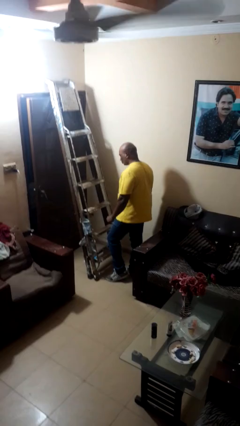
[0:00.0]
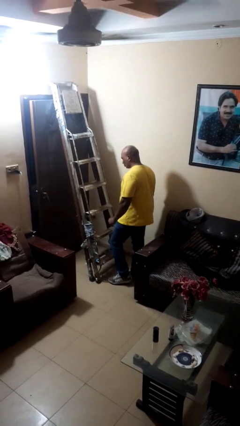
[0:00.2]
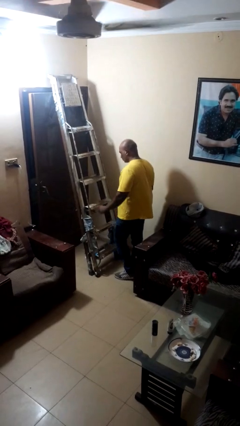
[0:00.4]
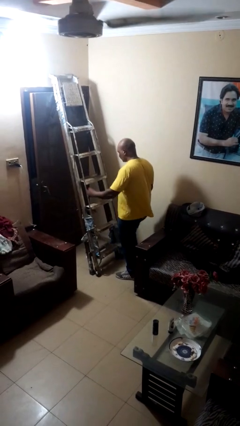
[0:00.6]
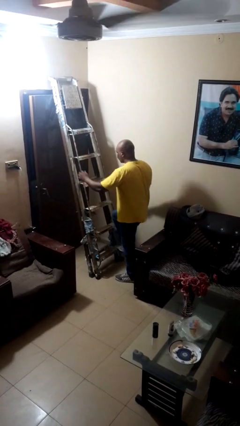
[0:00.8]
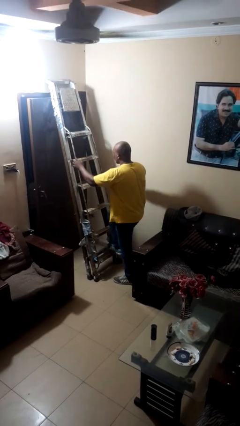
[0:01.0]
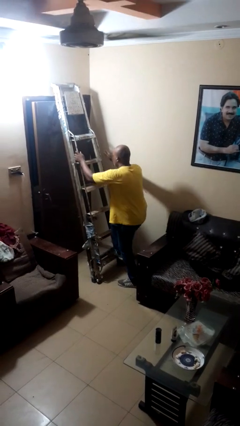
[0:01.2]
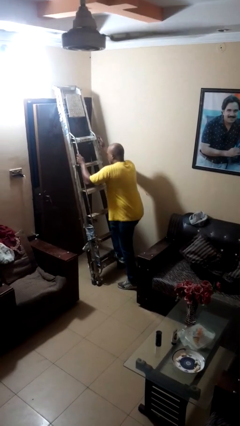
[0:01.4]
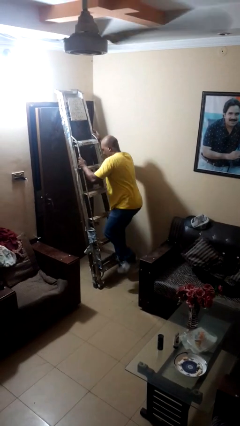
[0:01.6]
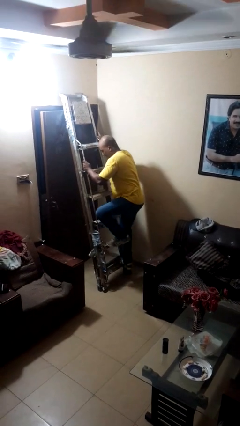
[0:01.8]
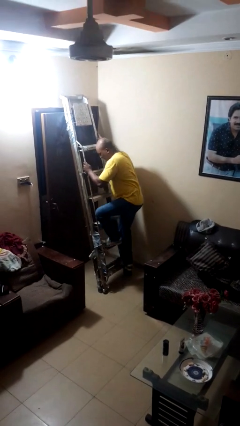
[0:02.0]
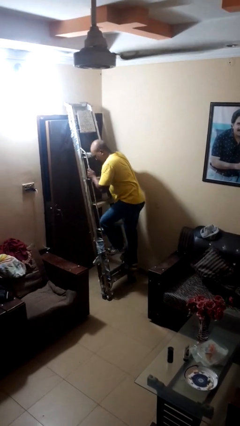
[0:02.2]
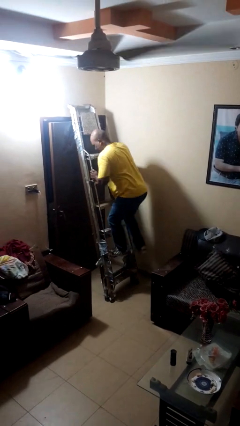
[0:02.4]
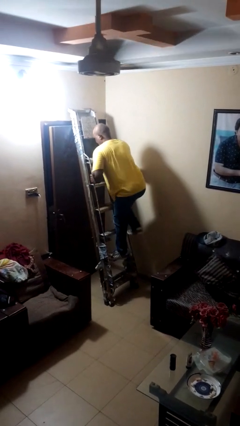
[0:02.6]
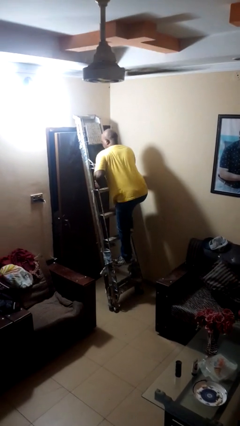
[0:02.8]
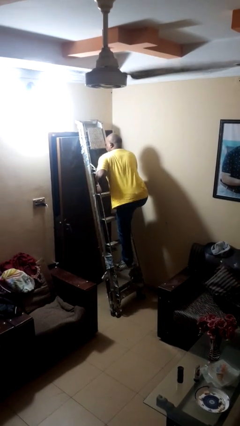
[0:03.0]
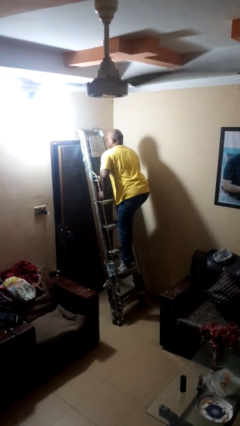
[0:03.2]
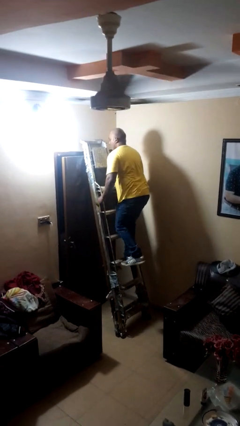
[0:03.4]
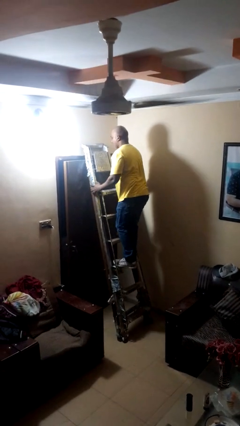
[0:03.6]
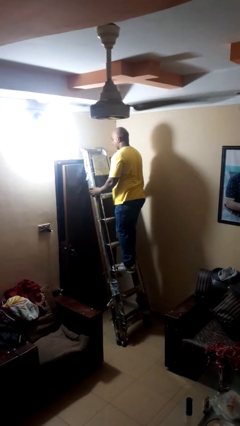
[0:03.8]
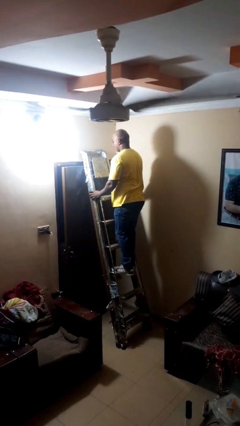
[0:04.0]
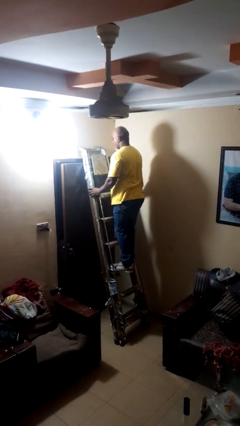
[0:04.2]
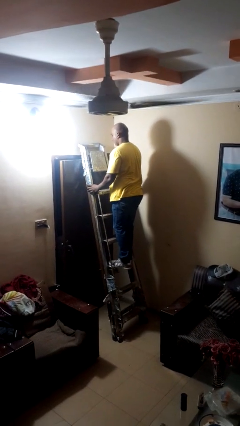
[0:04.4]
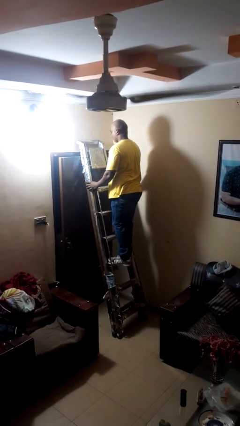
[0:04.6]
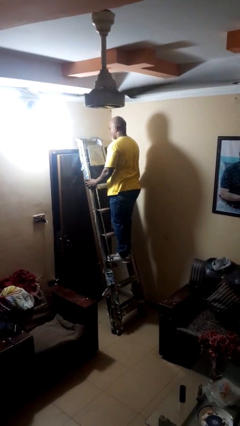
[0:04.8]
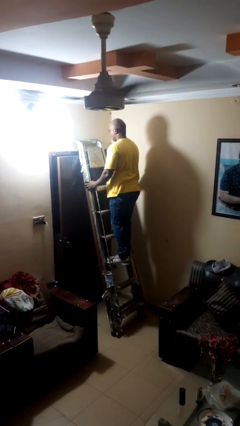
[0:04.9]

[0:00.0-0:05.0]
person climbs up stairs

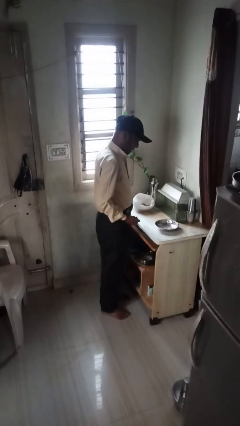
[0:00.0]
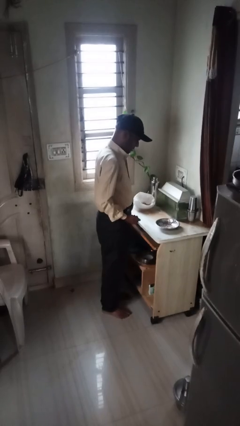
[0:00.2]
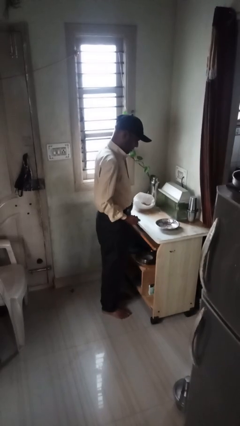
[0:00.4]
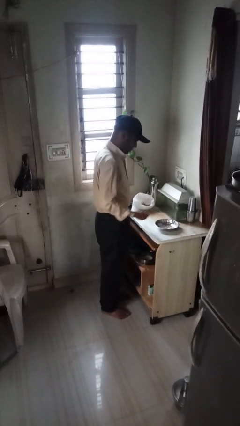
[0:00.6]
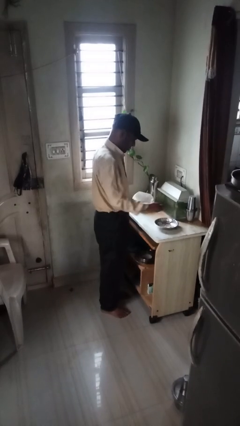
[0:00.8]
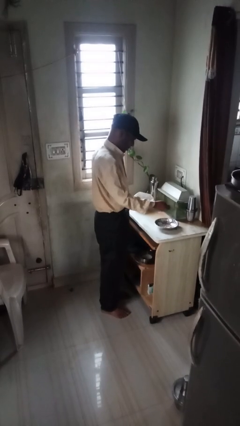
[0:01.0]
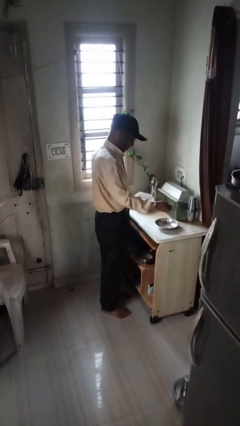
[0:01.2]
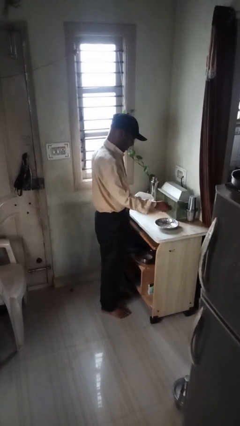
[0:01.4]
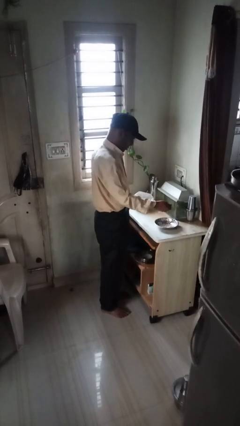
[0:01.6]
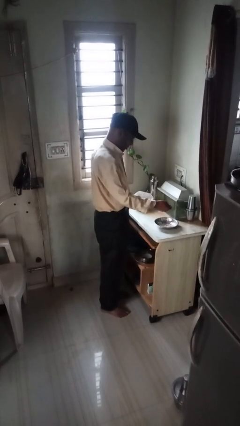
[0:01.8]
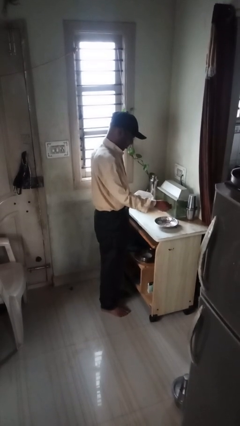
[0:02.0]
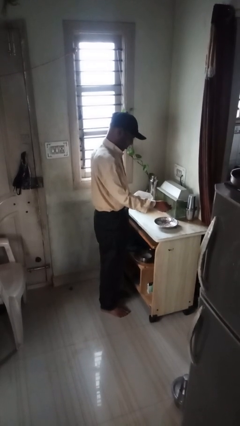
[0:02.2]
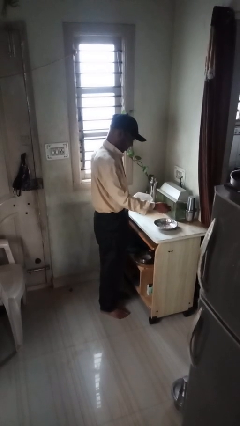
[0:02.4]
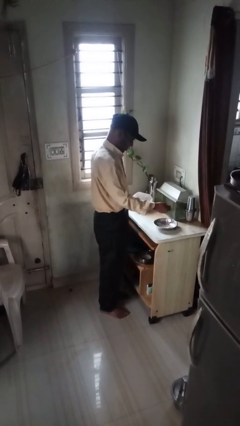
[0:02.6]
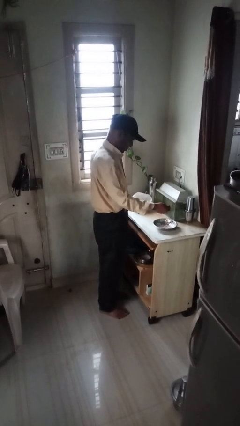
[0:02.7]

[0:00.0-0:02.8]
person pours into bowl

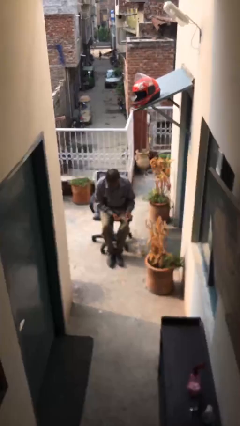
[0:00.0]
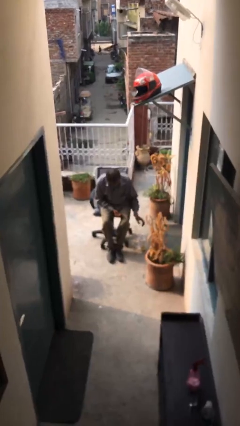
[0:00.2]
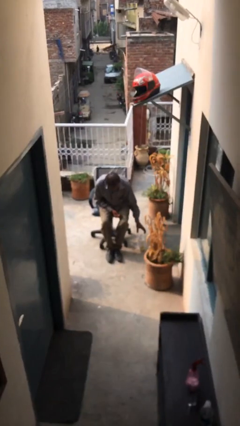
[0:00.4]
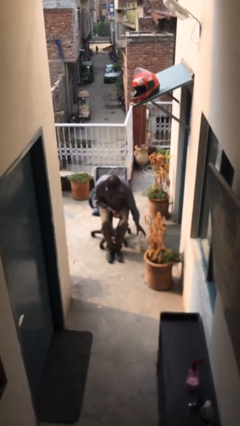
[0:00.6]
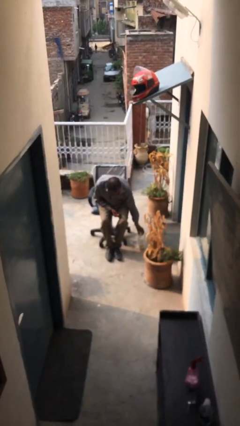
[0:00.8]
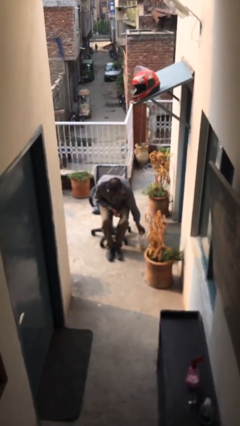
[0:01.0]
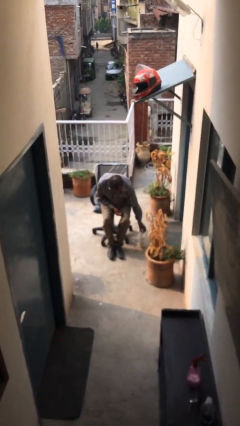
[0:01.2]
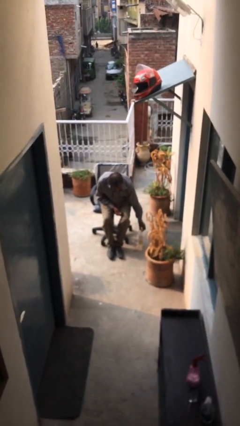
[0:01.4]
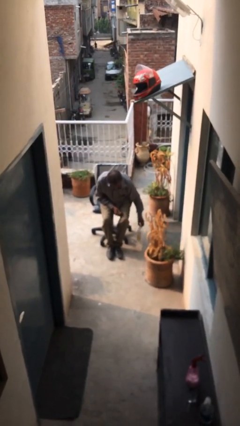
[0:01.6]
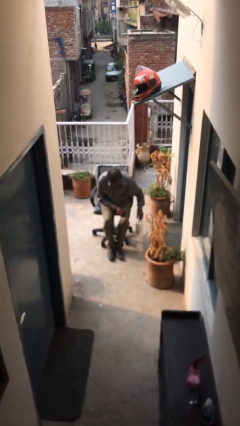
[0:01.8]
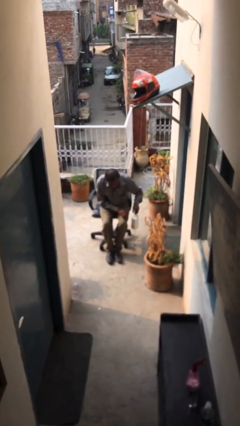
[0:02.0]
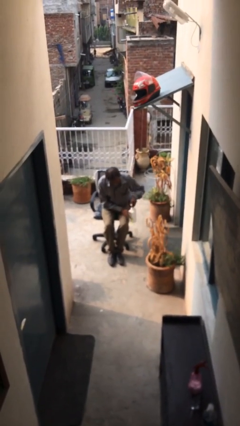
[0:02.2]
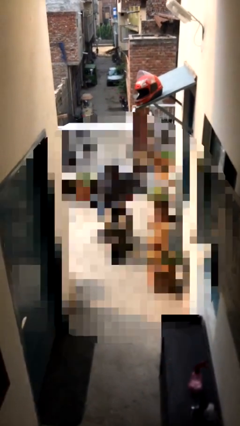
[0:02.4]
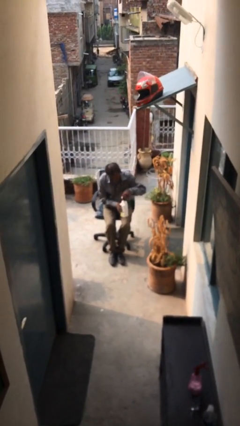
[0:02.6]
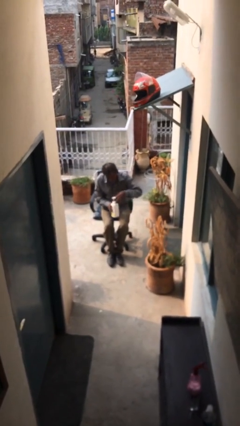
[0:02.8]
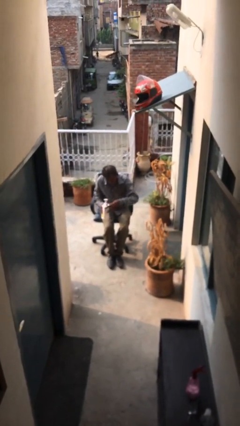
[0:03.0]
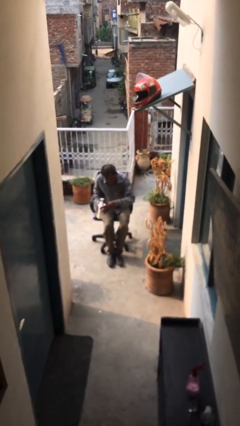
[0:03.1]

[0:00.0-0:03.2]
person picks up object from floor

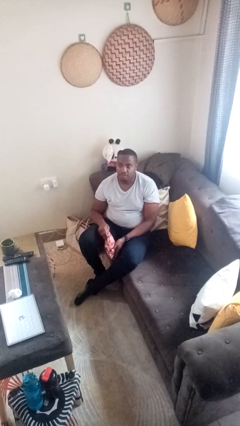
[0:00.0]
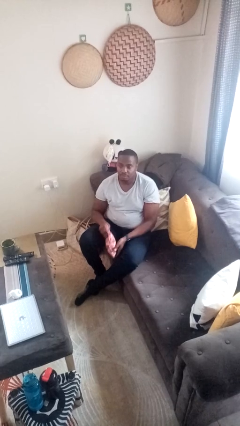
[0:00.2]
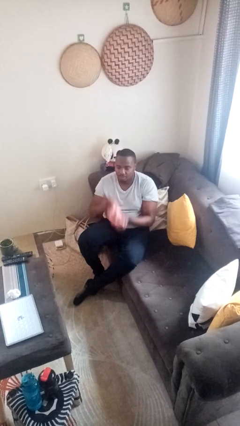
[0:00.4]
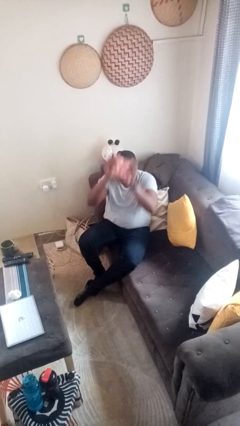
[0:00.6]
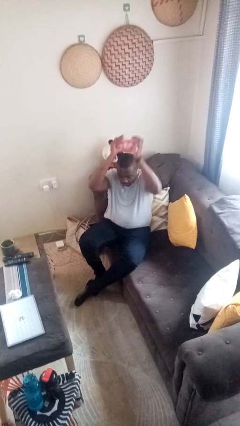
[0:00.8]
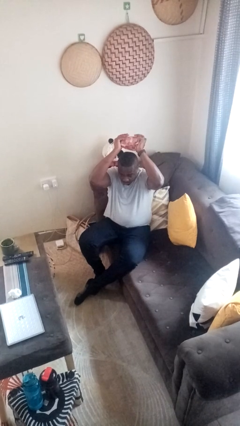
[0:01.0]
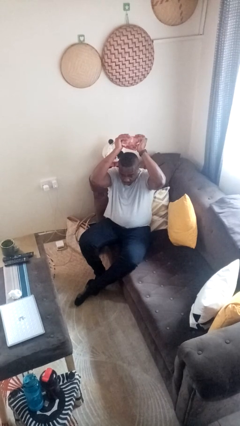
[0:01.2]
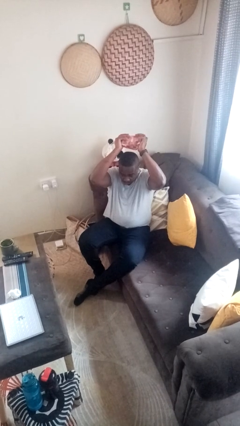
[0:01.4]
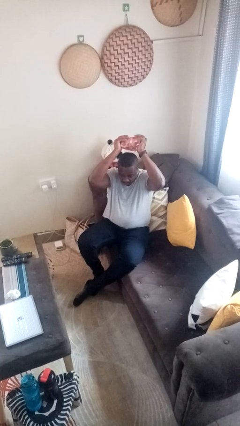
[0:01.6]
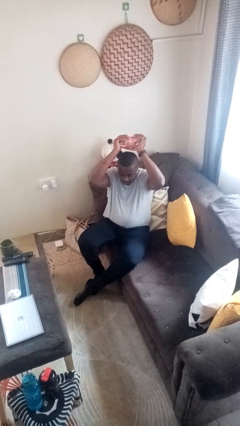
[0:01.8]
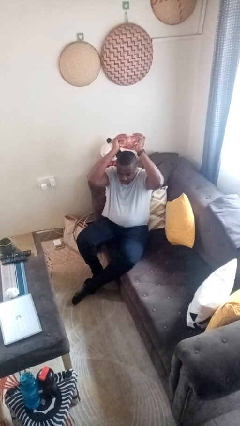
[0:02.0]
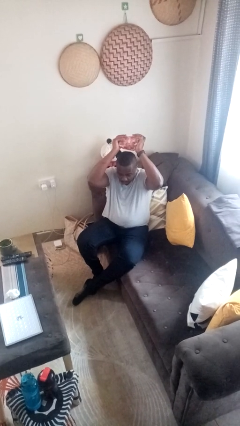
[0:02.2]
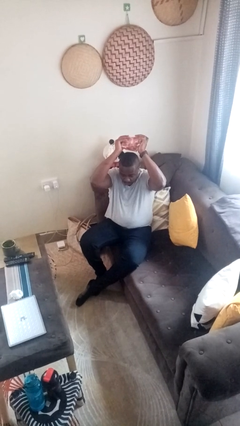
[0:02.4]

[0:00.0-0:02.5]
person holds object above head

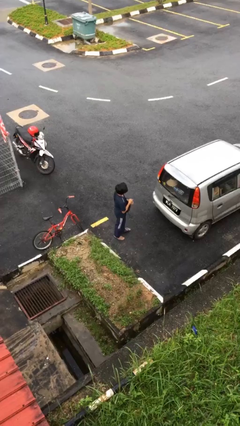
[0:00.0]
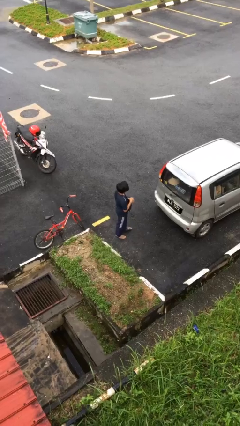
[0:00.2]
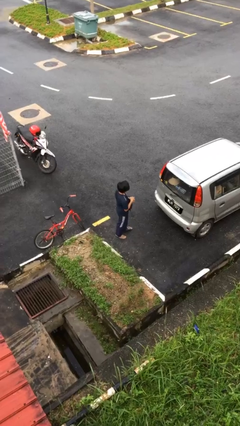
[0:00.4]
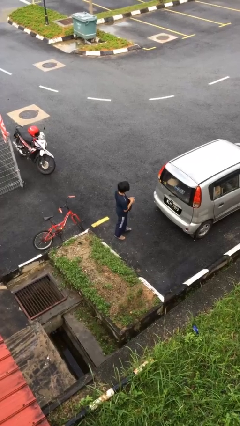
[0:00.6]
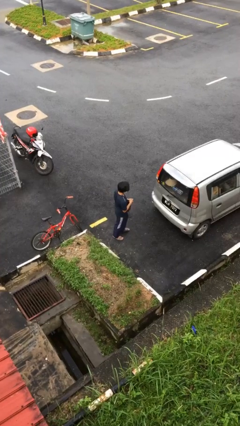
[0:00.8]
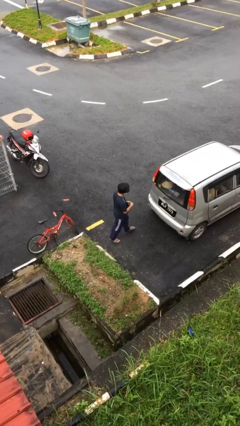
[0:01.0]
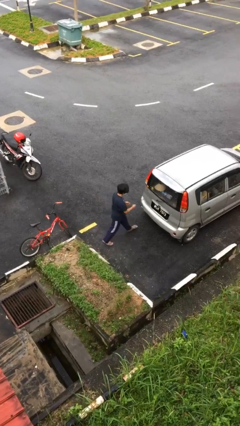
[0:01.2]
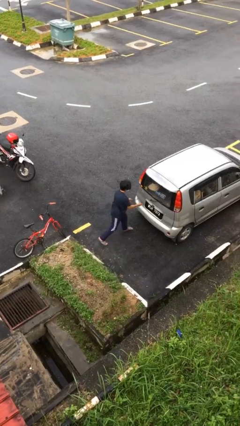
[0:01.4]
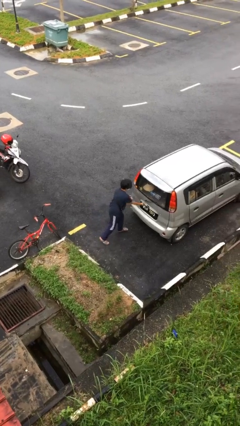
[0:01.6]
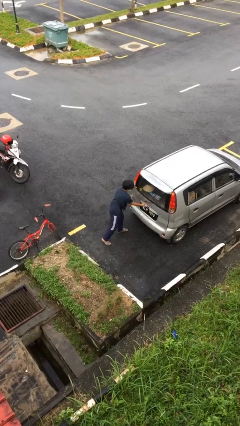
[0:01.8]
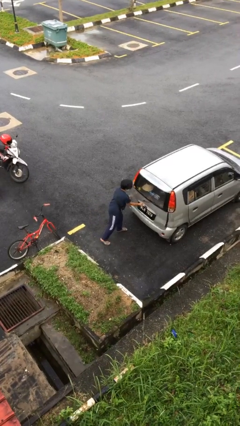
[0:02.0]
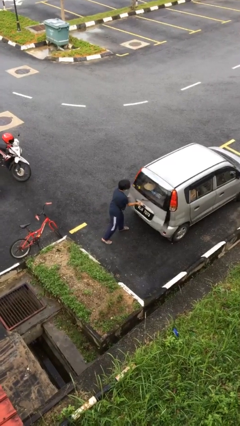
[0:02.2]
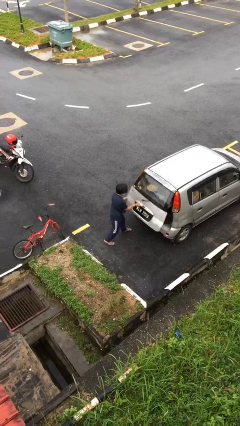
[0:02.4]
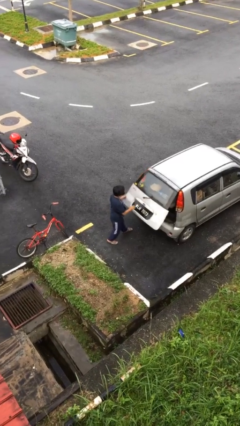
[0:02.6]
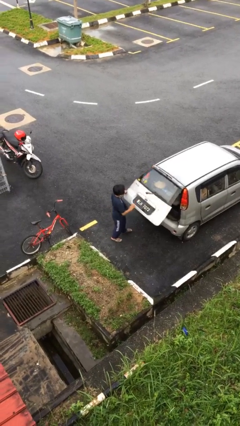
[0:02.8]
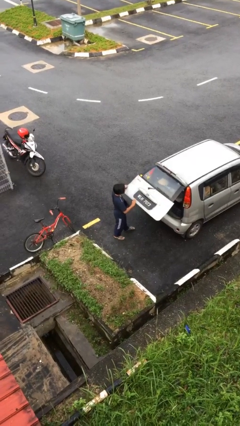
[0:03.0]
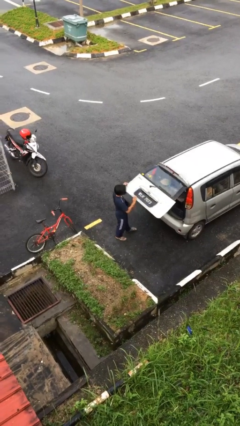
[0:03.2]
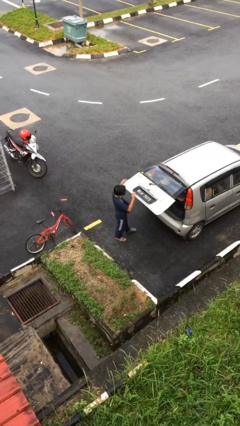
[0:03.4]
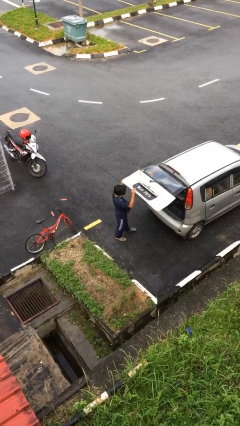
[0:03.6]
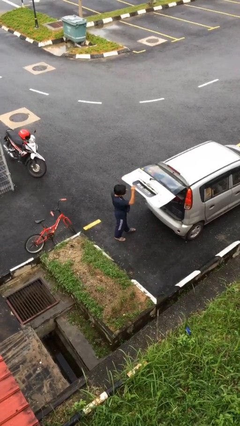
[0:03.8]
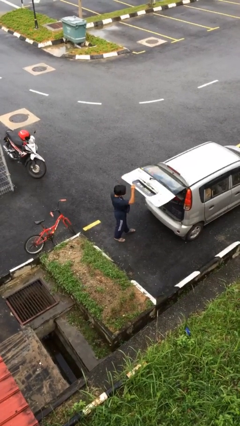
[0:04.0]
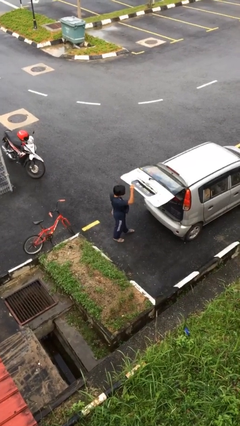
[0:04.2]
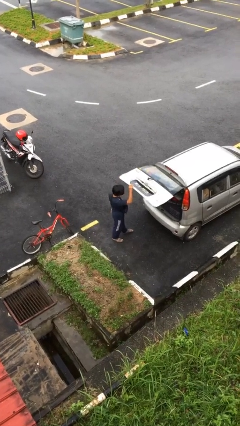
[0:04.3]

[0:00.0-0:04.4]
person opens car trunk

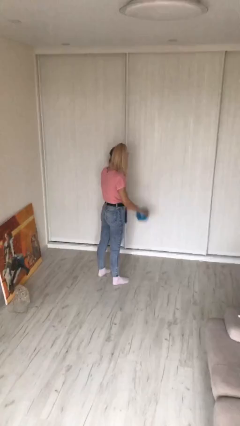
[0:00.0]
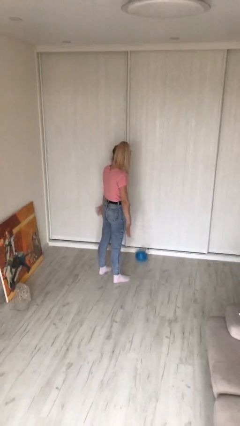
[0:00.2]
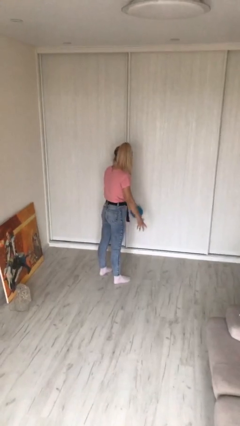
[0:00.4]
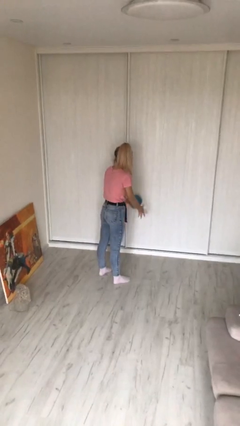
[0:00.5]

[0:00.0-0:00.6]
person bounces ball on floor
